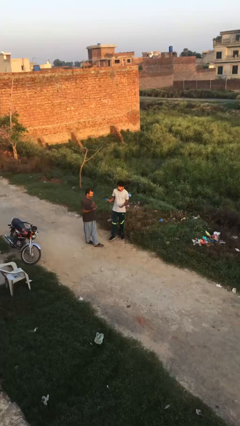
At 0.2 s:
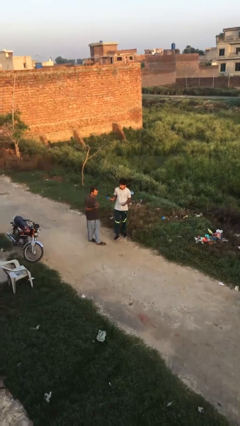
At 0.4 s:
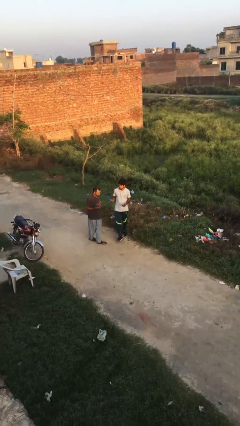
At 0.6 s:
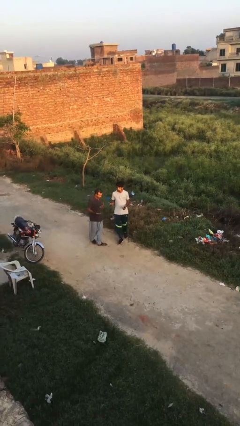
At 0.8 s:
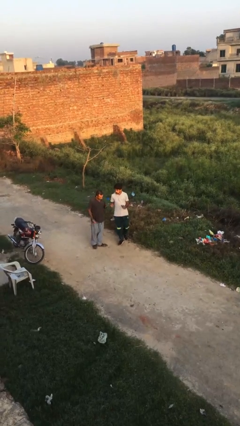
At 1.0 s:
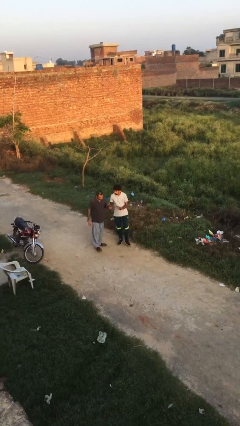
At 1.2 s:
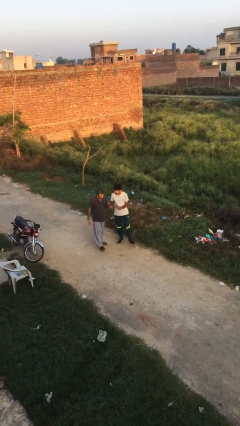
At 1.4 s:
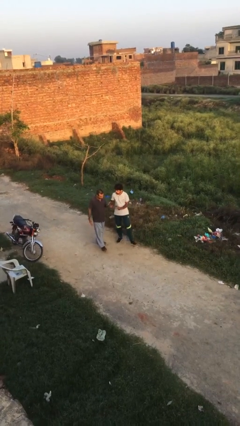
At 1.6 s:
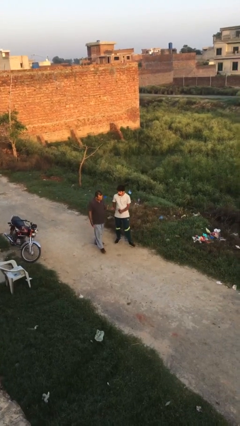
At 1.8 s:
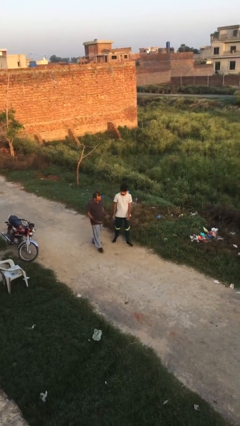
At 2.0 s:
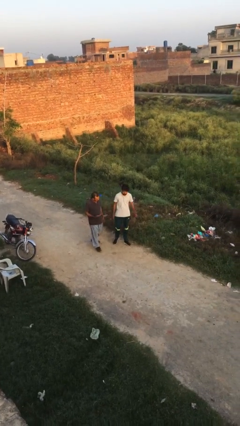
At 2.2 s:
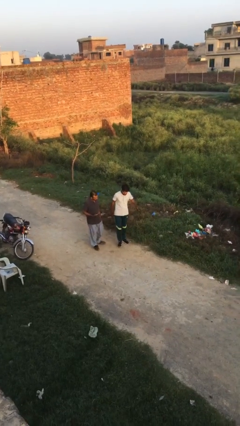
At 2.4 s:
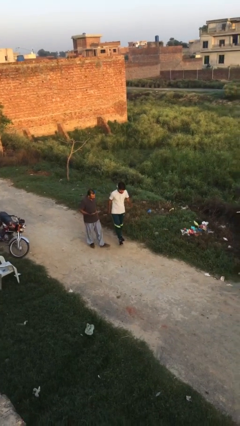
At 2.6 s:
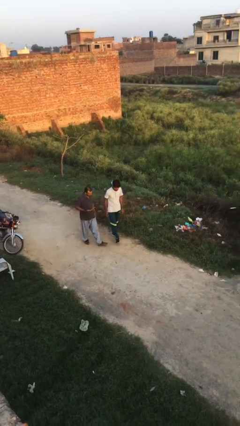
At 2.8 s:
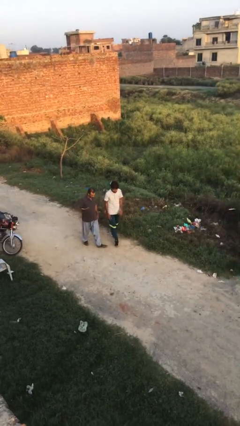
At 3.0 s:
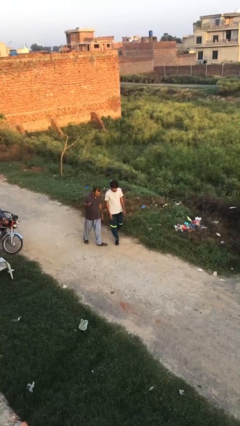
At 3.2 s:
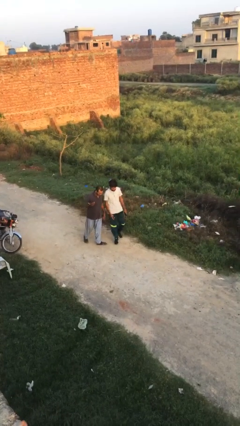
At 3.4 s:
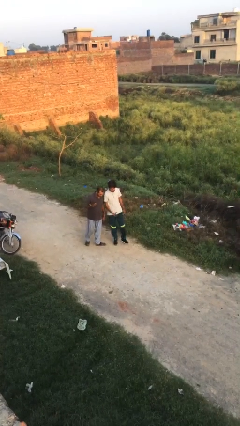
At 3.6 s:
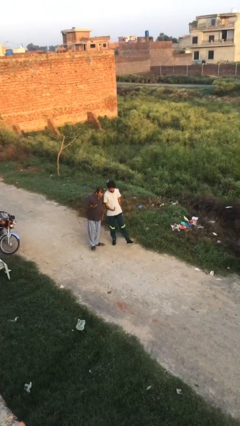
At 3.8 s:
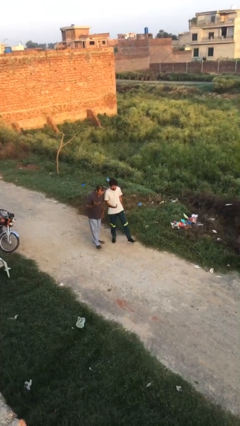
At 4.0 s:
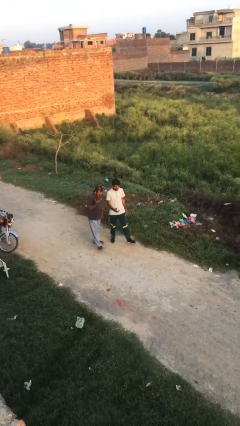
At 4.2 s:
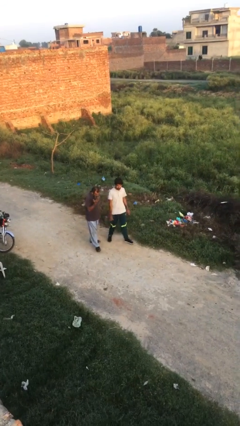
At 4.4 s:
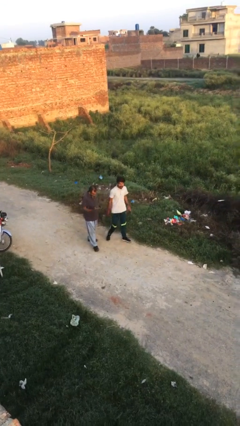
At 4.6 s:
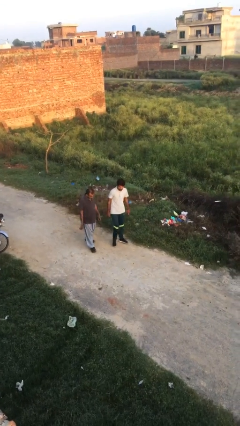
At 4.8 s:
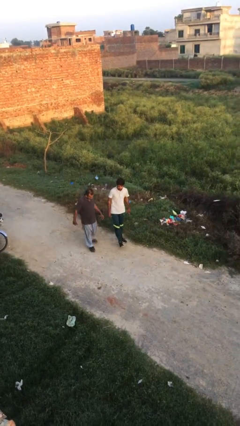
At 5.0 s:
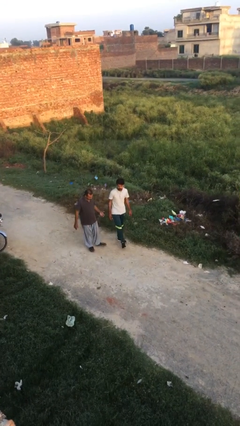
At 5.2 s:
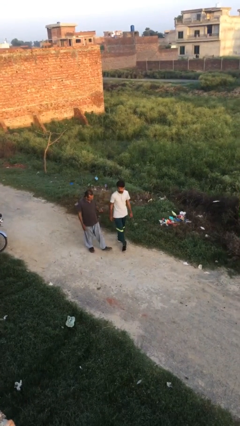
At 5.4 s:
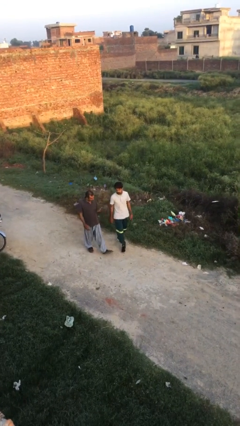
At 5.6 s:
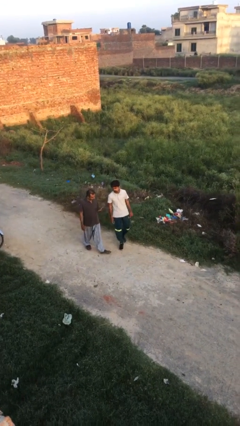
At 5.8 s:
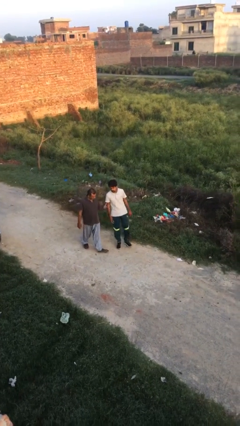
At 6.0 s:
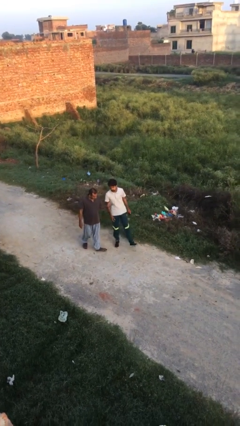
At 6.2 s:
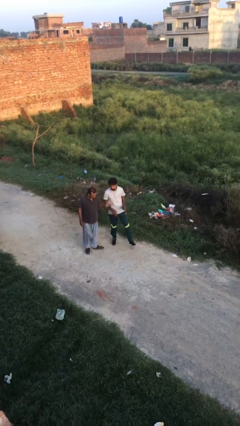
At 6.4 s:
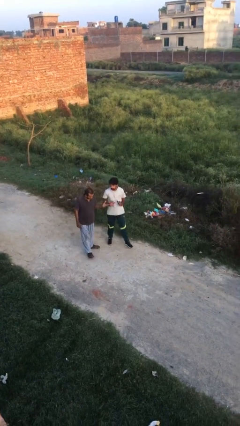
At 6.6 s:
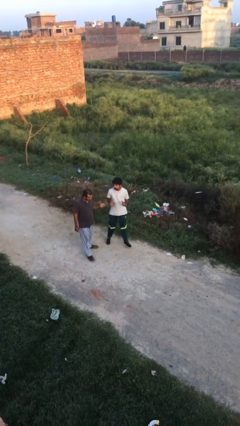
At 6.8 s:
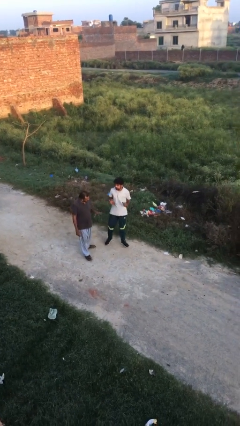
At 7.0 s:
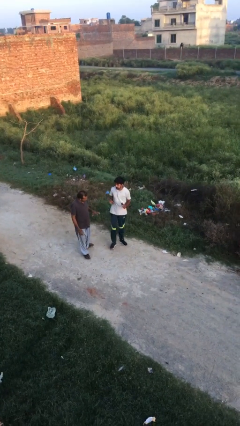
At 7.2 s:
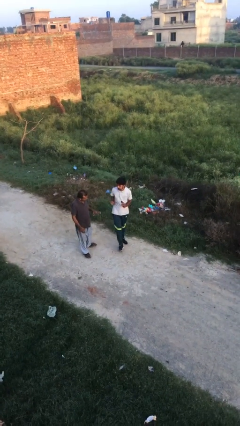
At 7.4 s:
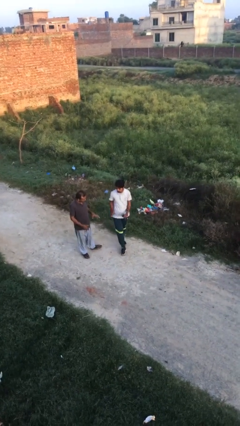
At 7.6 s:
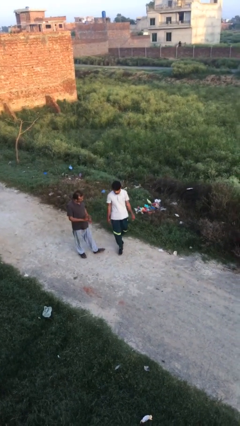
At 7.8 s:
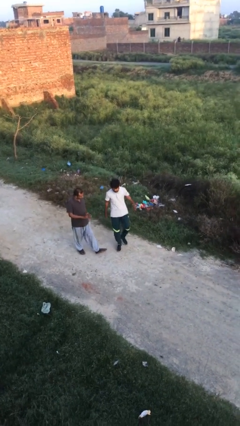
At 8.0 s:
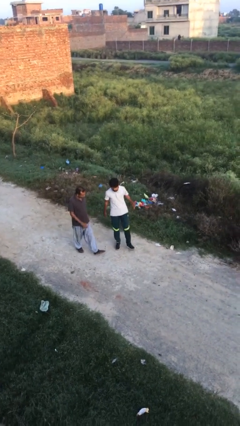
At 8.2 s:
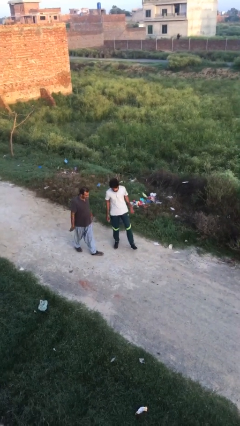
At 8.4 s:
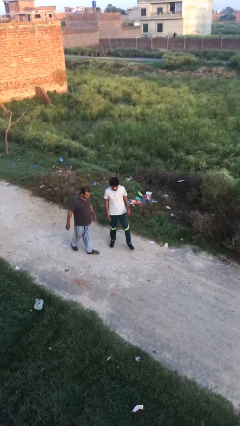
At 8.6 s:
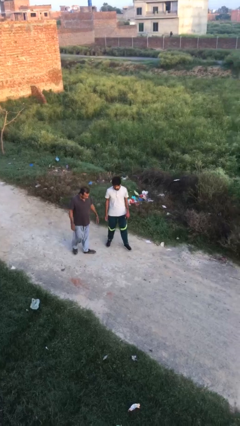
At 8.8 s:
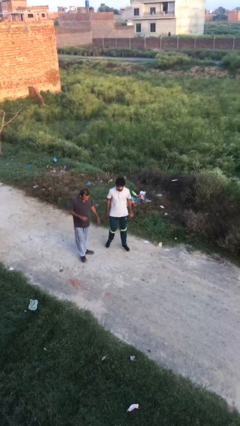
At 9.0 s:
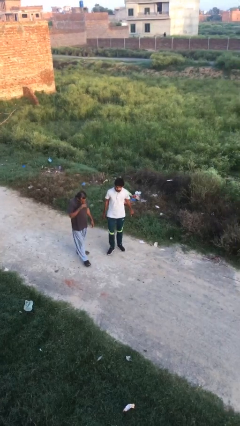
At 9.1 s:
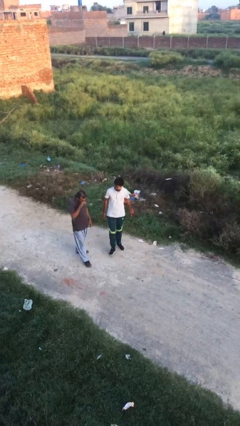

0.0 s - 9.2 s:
person talks to person

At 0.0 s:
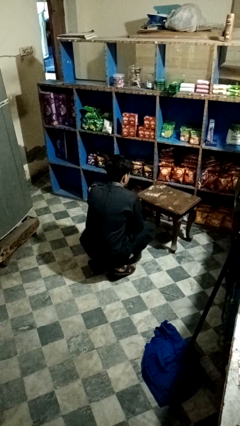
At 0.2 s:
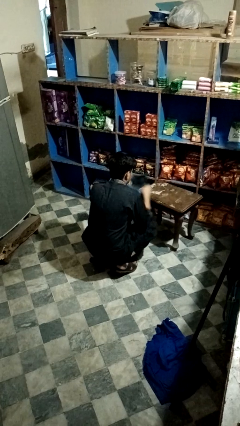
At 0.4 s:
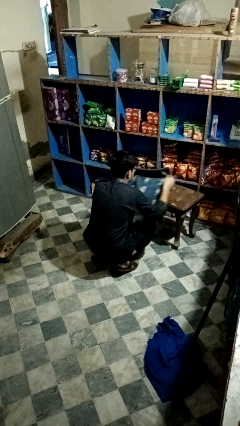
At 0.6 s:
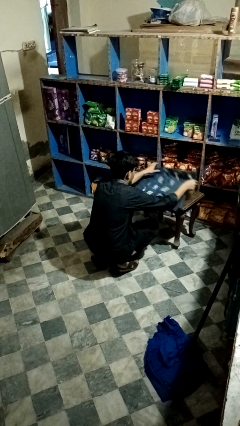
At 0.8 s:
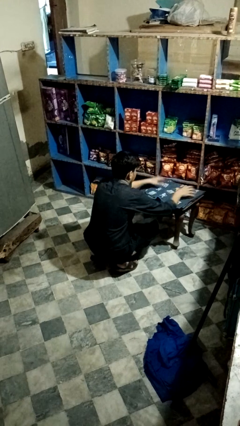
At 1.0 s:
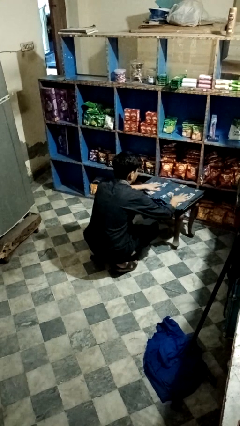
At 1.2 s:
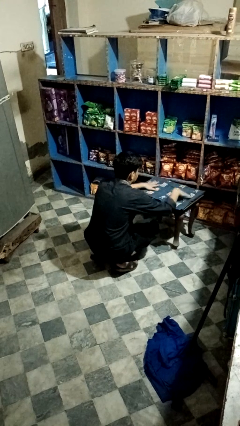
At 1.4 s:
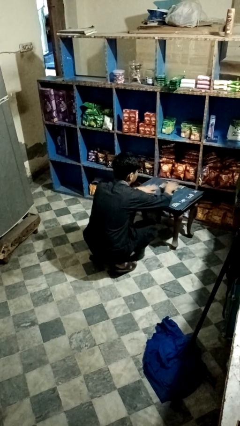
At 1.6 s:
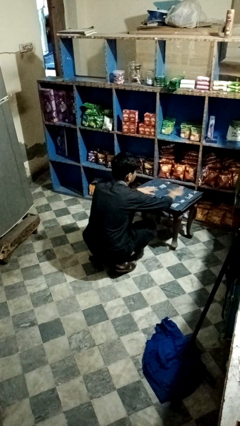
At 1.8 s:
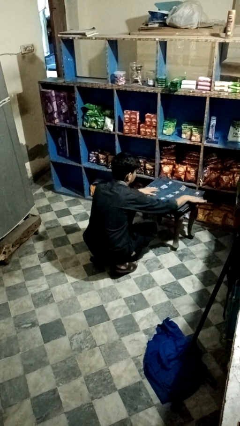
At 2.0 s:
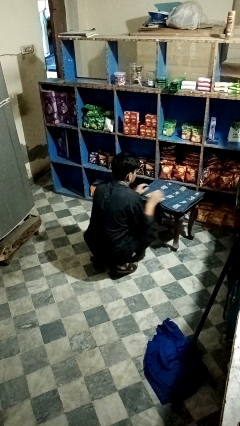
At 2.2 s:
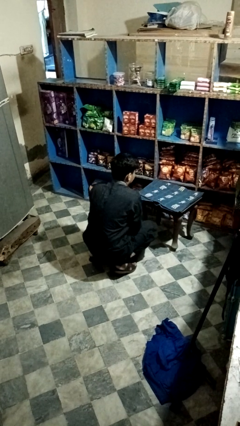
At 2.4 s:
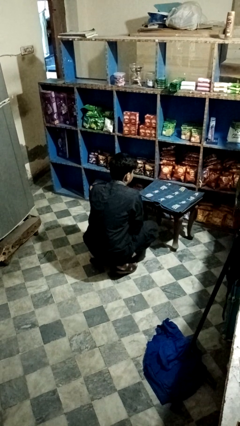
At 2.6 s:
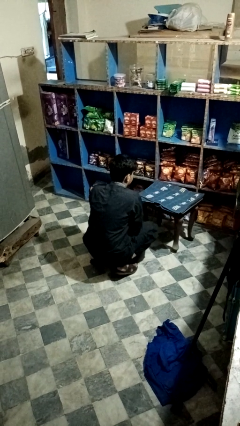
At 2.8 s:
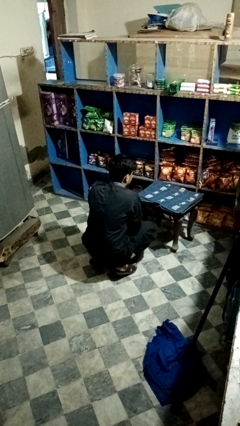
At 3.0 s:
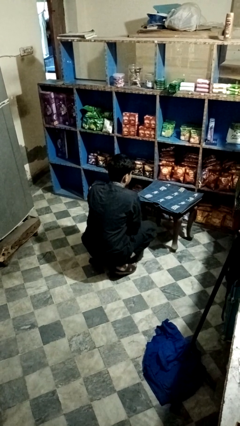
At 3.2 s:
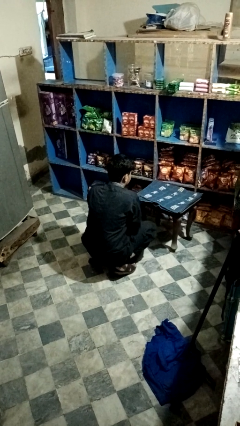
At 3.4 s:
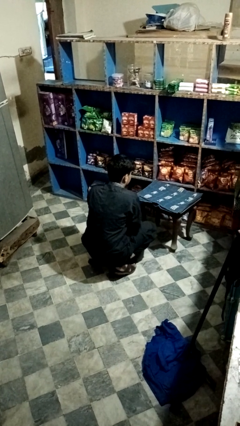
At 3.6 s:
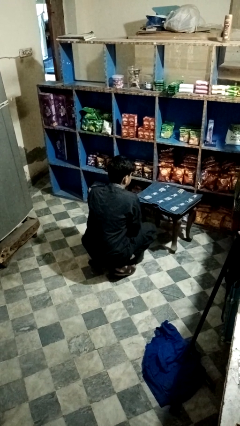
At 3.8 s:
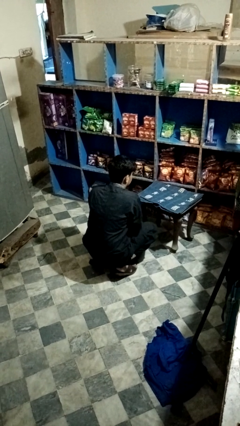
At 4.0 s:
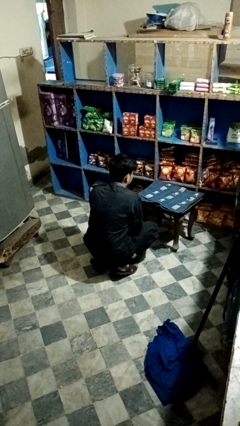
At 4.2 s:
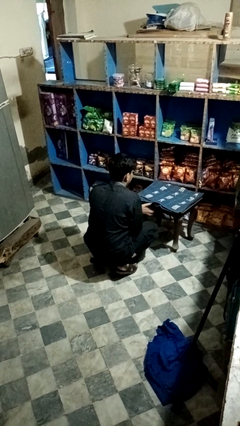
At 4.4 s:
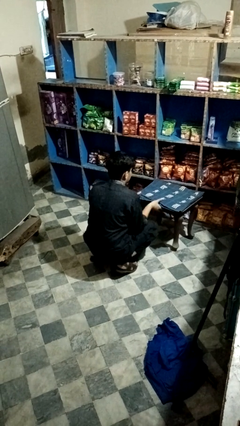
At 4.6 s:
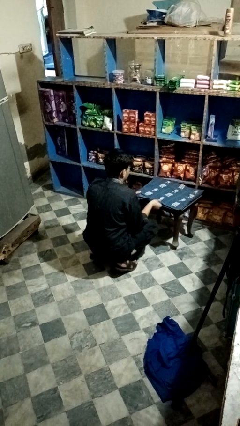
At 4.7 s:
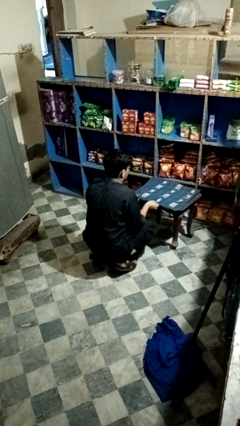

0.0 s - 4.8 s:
person spreads tablecloth

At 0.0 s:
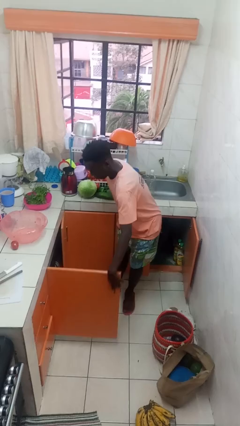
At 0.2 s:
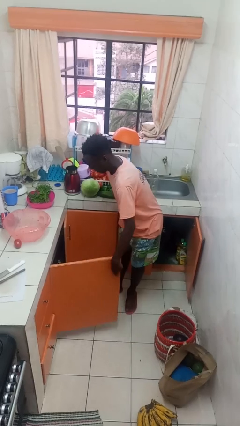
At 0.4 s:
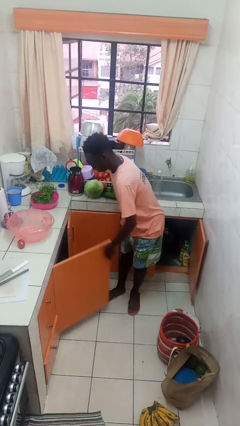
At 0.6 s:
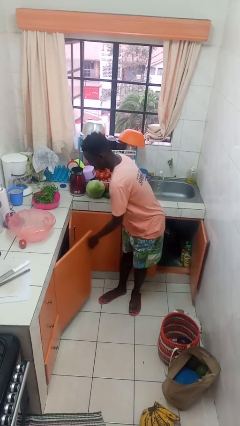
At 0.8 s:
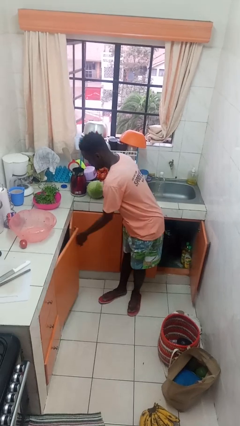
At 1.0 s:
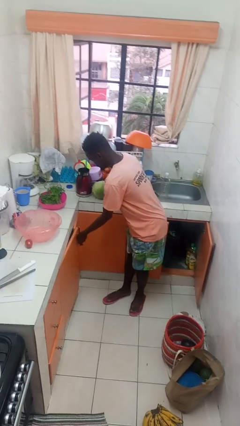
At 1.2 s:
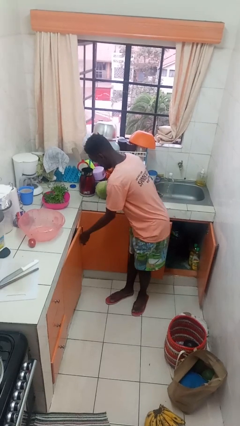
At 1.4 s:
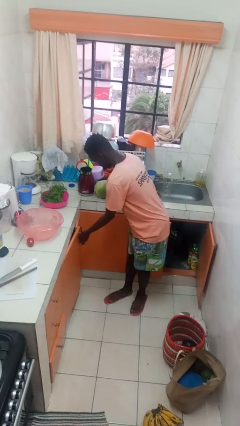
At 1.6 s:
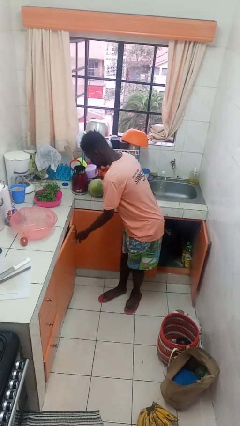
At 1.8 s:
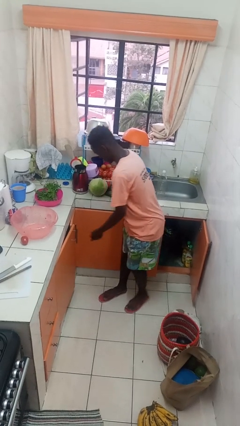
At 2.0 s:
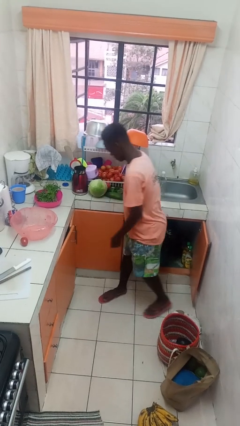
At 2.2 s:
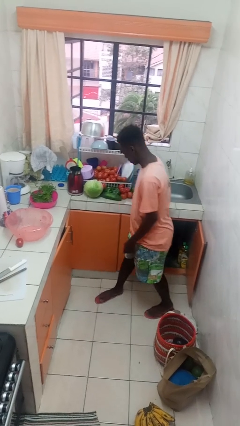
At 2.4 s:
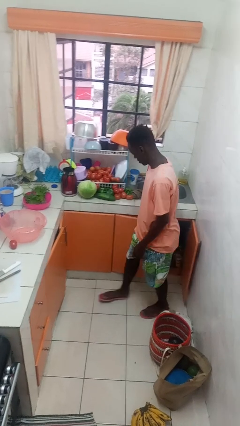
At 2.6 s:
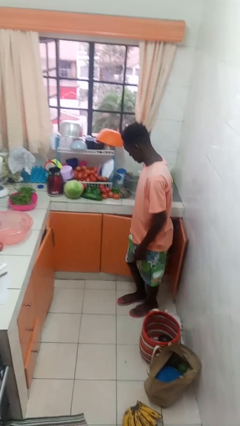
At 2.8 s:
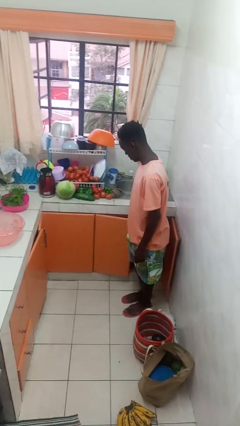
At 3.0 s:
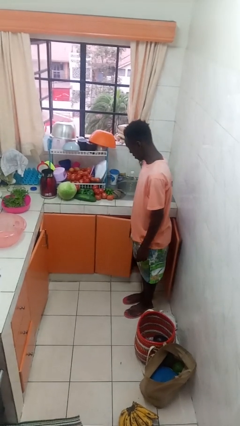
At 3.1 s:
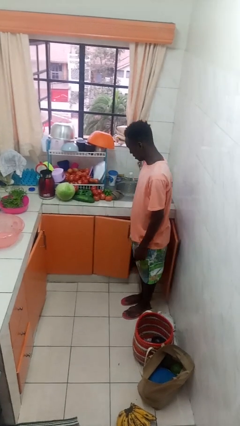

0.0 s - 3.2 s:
person closes cabinet

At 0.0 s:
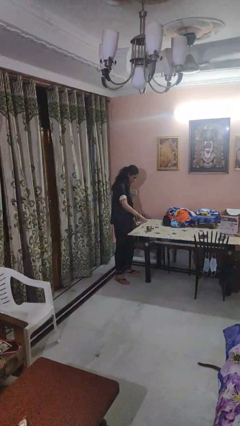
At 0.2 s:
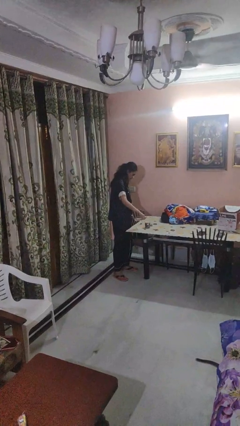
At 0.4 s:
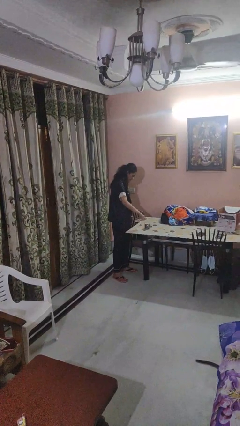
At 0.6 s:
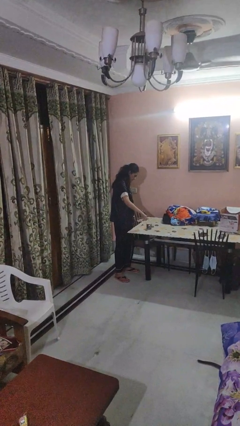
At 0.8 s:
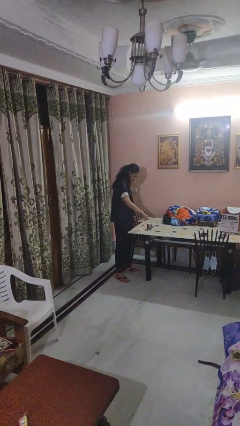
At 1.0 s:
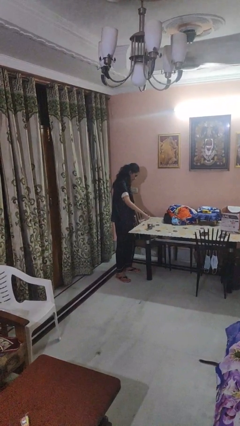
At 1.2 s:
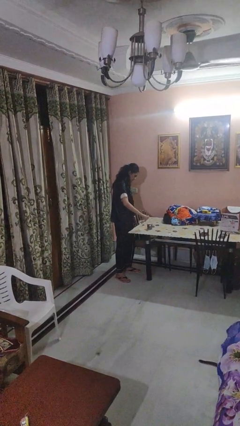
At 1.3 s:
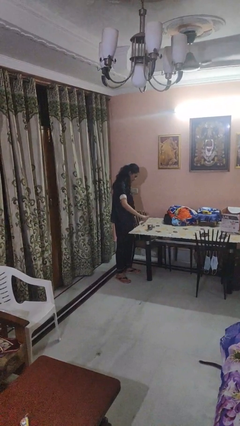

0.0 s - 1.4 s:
person pours liquid into cup
